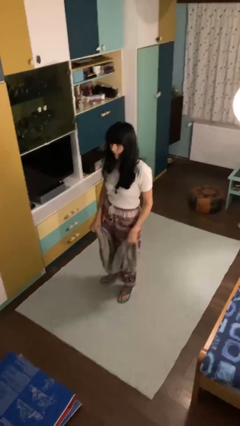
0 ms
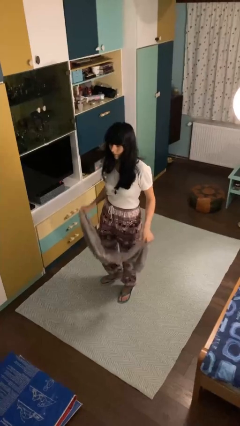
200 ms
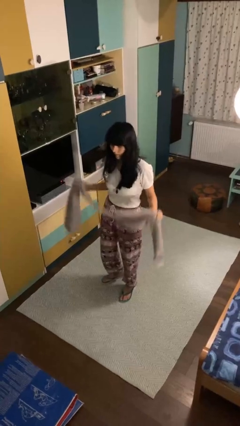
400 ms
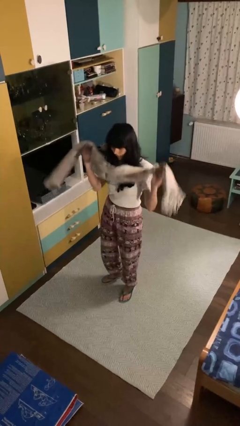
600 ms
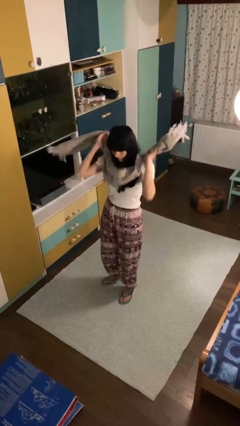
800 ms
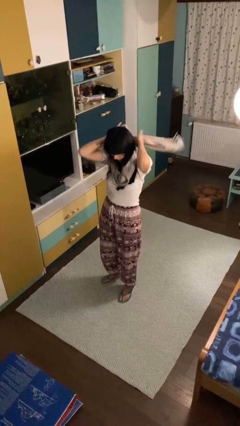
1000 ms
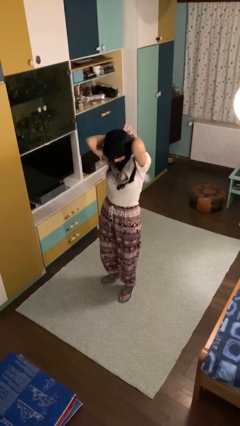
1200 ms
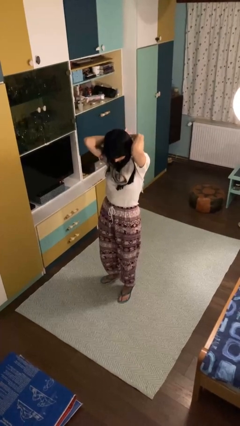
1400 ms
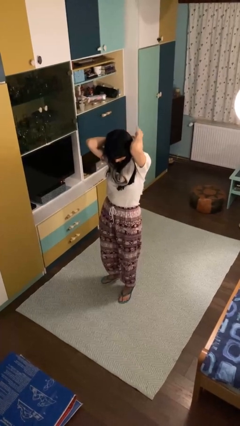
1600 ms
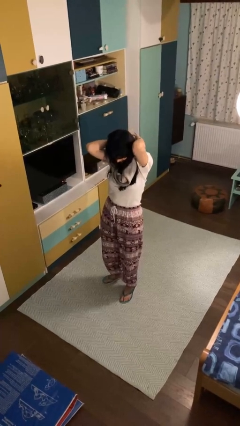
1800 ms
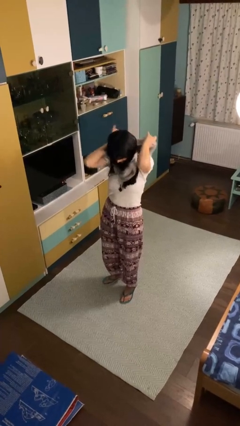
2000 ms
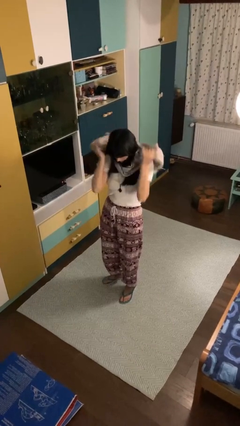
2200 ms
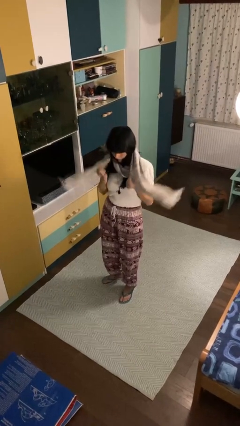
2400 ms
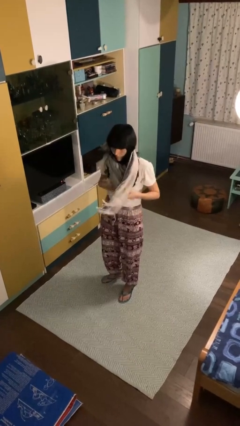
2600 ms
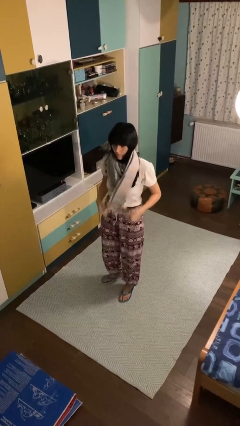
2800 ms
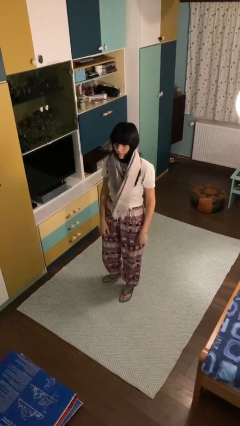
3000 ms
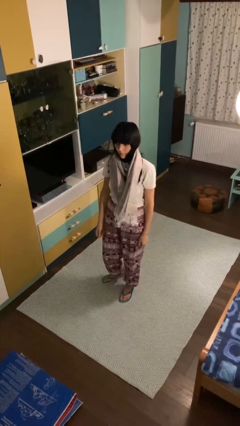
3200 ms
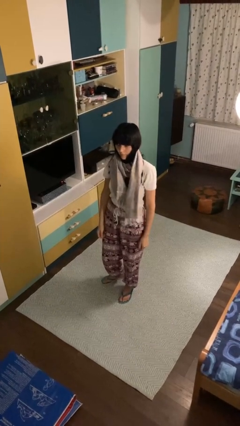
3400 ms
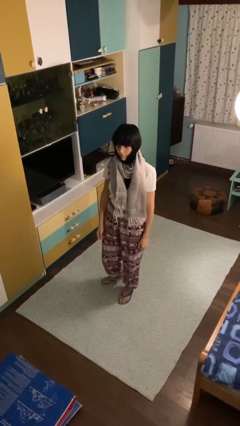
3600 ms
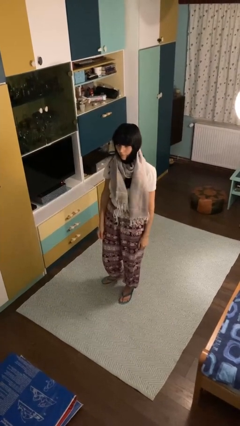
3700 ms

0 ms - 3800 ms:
person puts on scarf

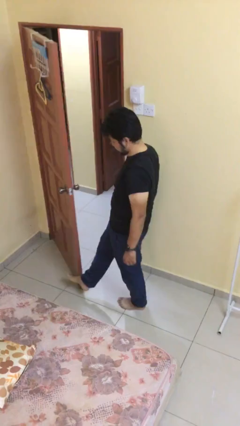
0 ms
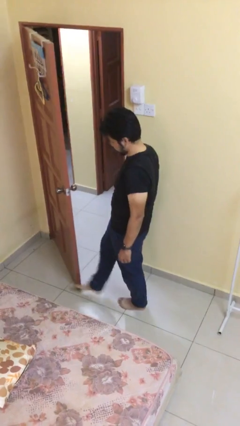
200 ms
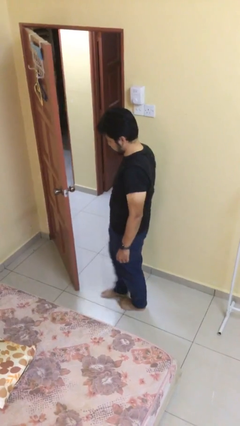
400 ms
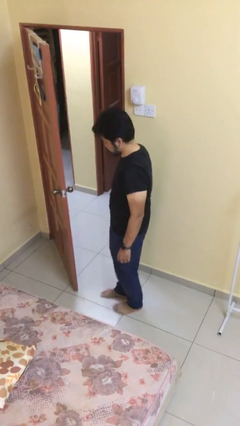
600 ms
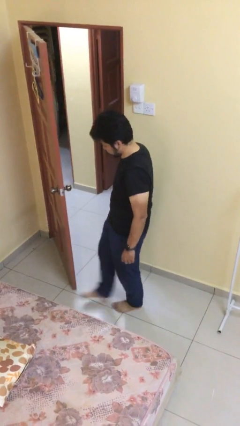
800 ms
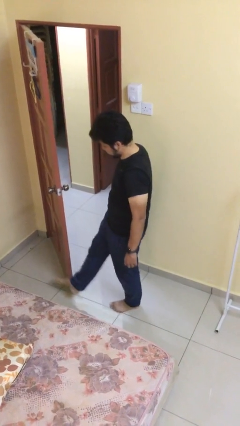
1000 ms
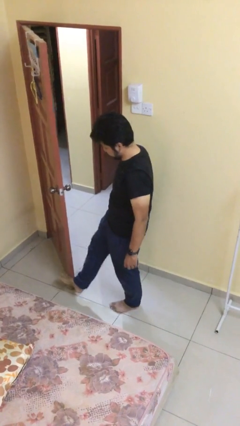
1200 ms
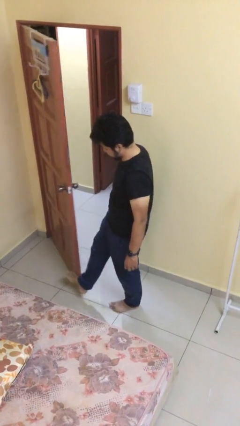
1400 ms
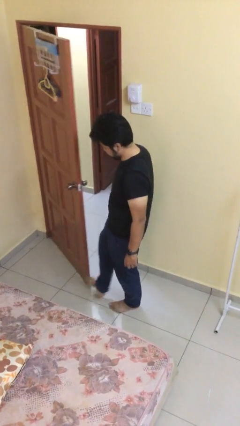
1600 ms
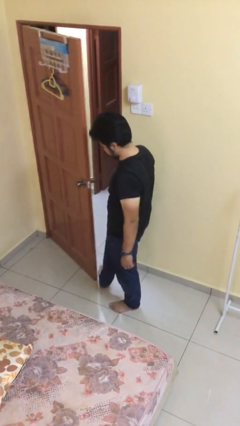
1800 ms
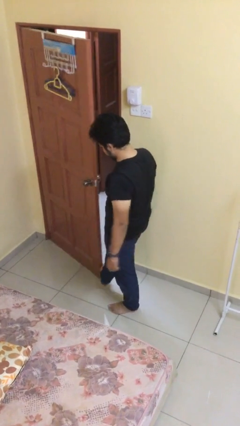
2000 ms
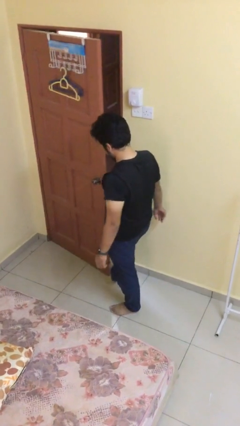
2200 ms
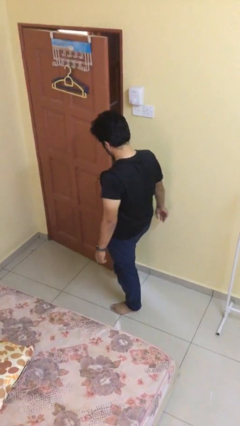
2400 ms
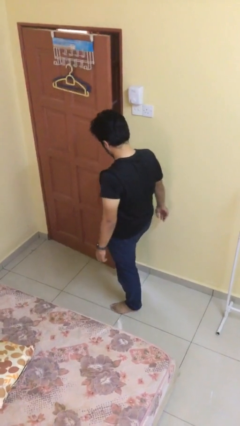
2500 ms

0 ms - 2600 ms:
person closes door with foot

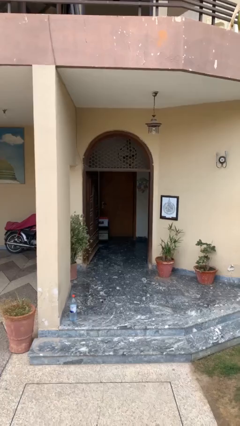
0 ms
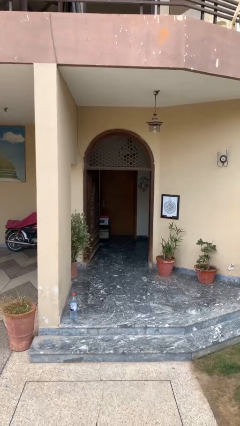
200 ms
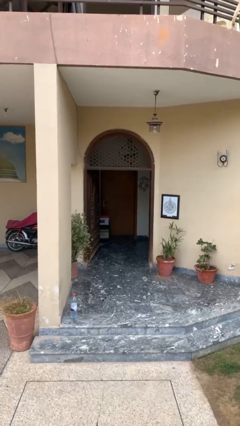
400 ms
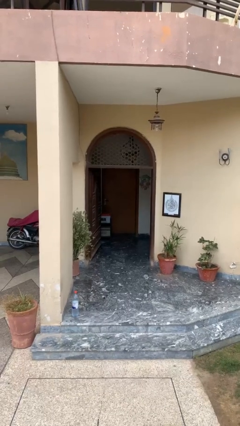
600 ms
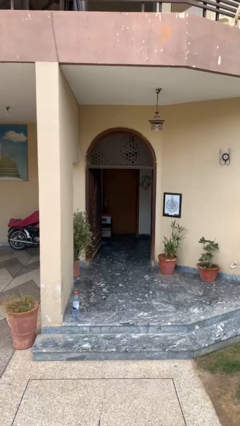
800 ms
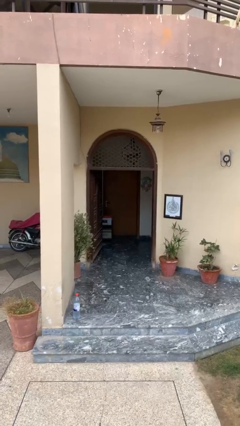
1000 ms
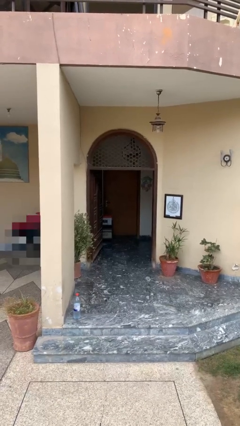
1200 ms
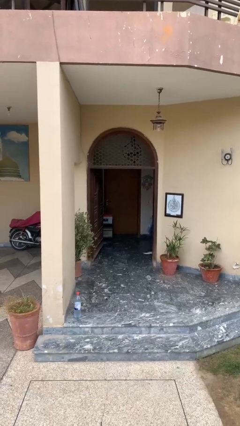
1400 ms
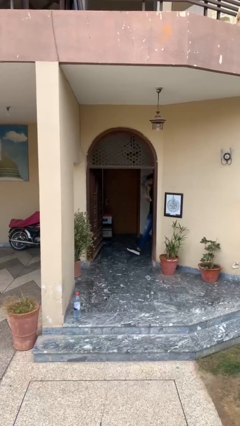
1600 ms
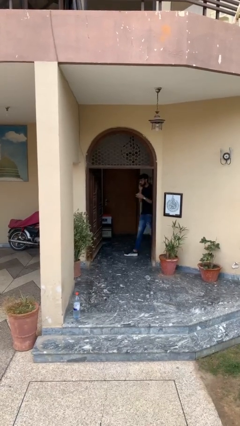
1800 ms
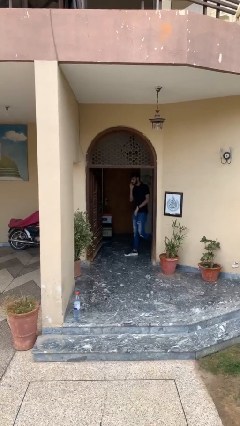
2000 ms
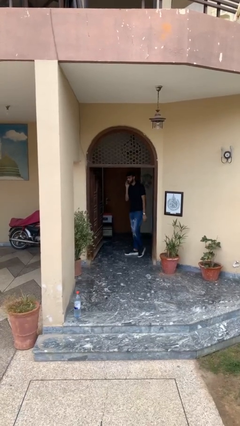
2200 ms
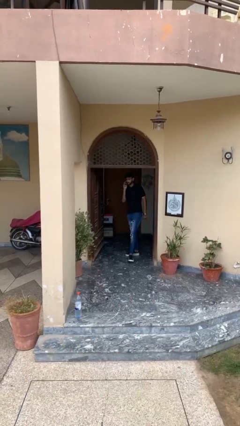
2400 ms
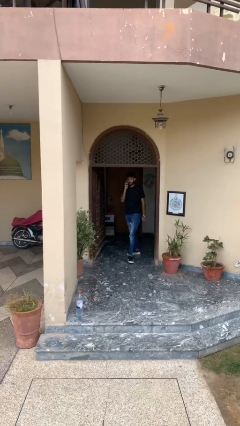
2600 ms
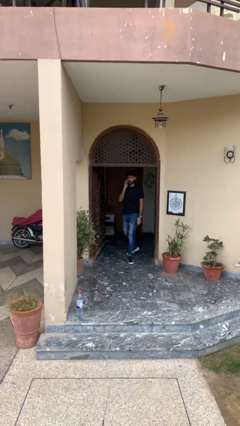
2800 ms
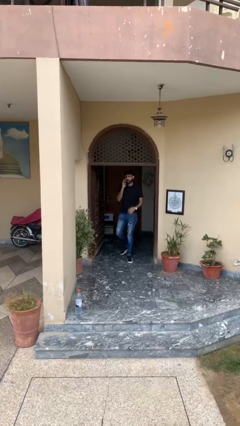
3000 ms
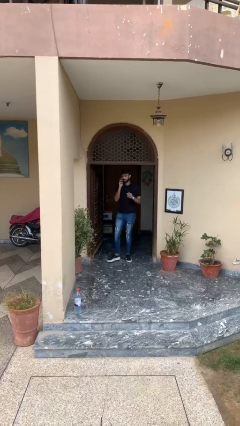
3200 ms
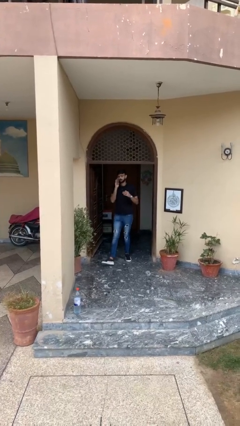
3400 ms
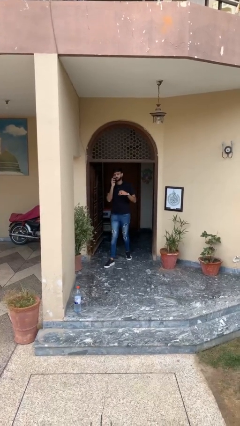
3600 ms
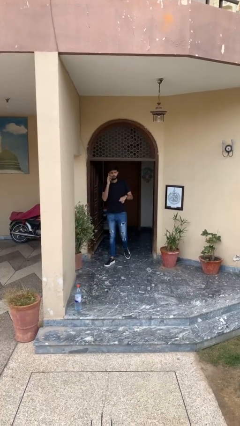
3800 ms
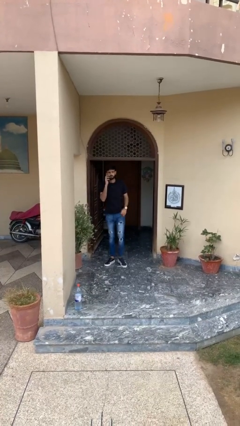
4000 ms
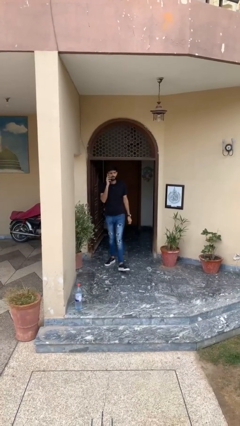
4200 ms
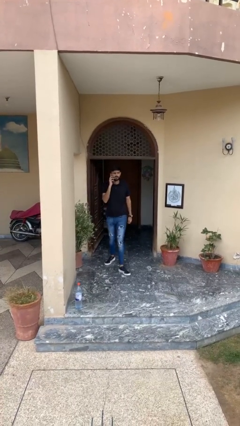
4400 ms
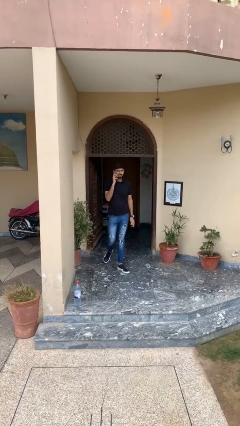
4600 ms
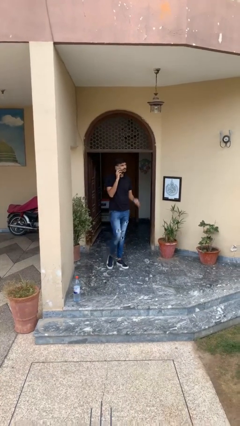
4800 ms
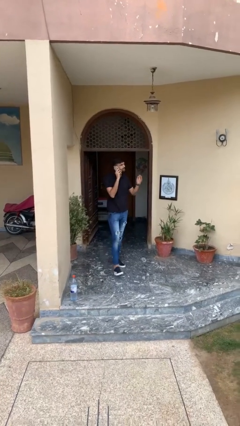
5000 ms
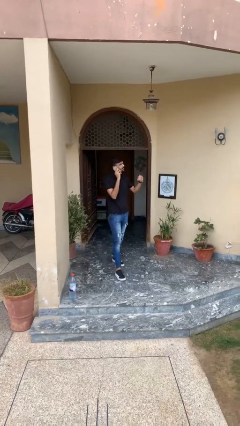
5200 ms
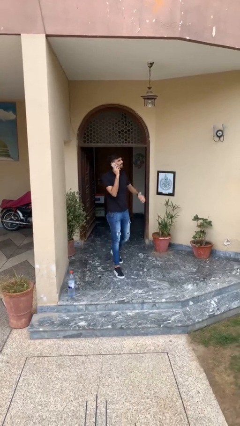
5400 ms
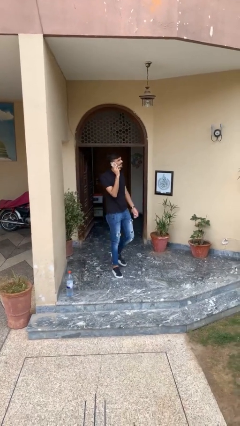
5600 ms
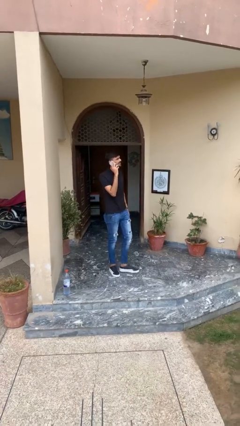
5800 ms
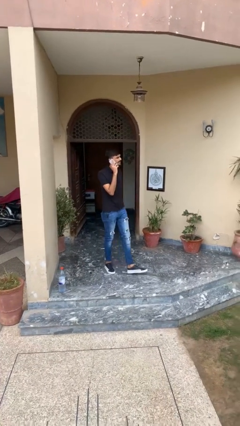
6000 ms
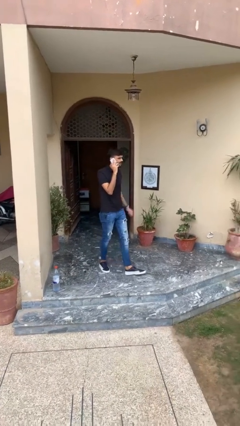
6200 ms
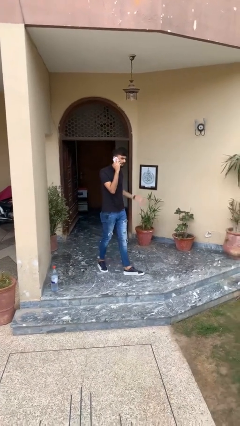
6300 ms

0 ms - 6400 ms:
person enters scene through structure

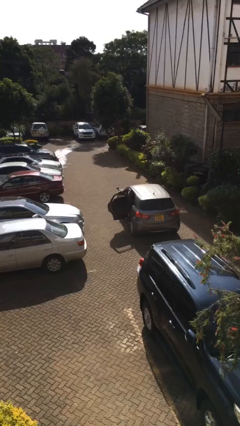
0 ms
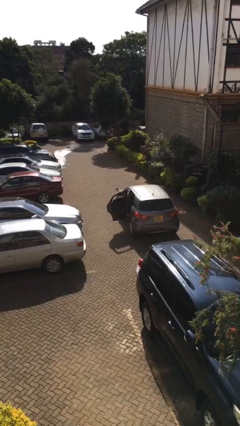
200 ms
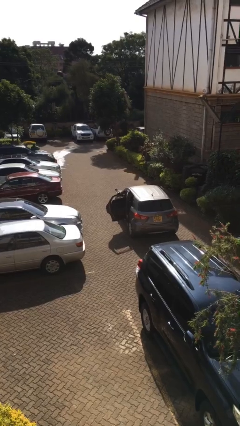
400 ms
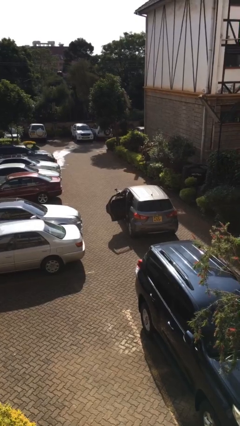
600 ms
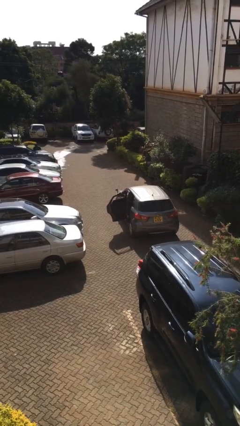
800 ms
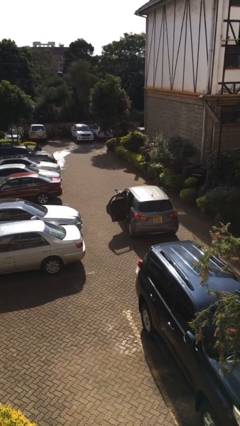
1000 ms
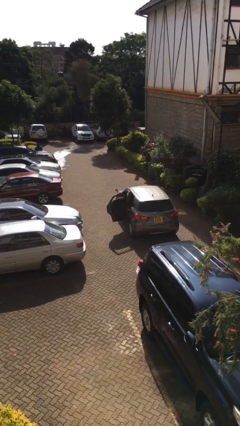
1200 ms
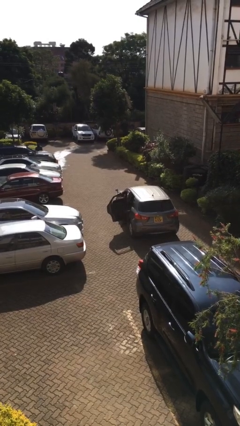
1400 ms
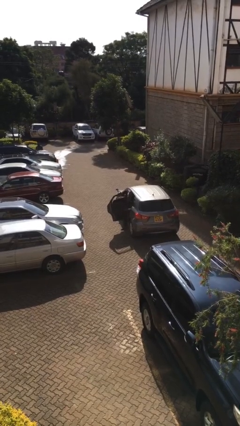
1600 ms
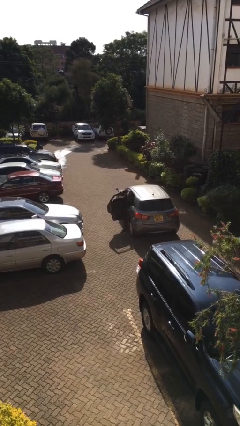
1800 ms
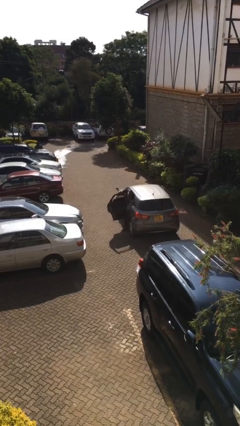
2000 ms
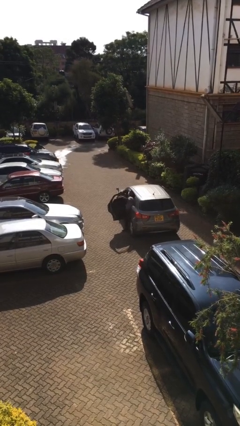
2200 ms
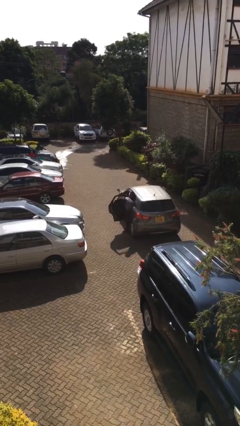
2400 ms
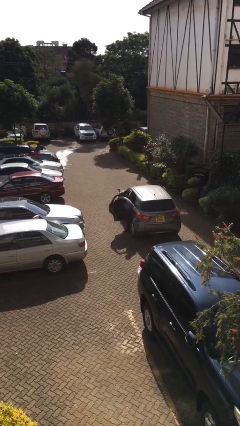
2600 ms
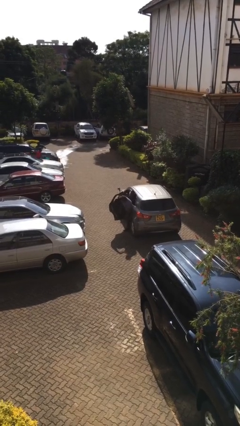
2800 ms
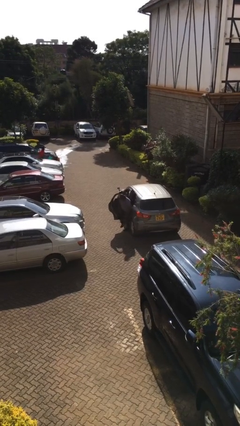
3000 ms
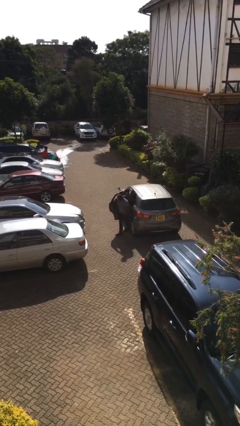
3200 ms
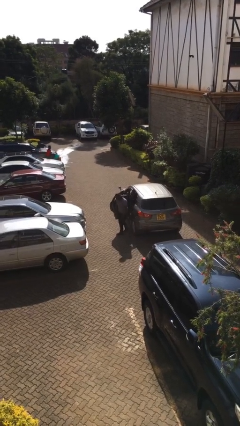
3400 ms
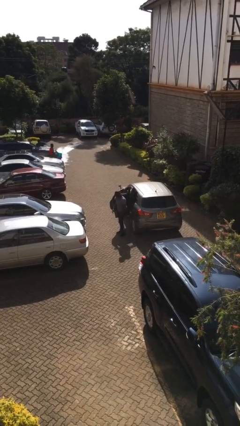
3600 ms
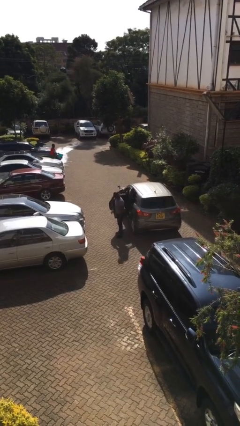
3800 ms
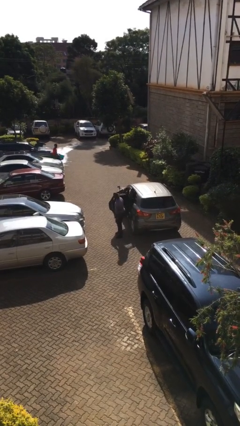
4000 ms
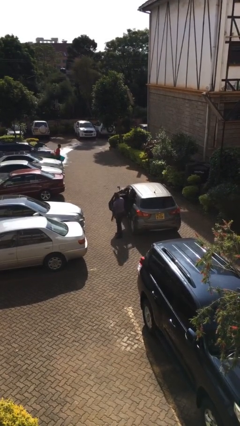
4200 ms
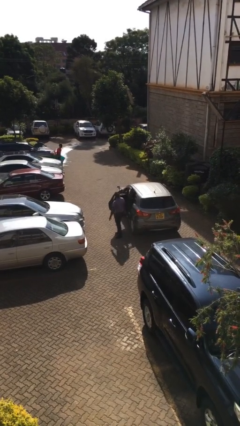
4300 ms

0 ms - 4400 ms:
person exits car

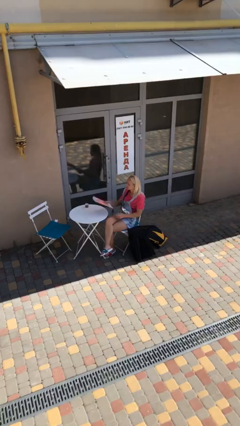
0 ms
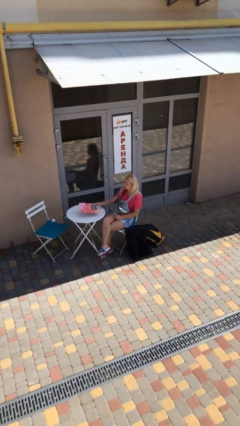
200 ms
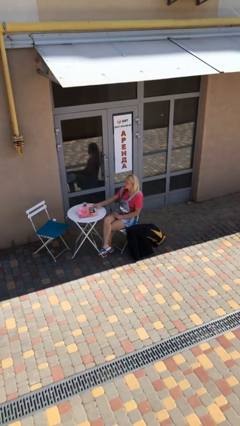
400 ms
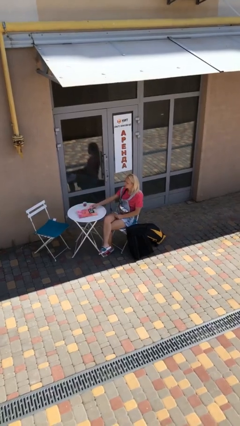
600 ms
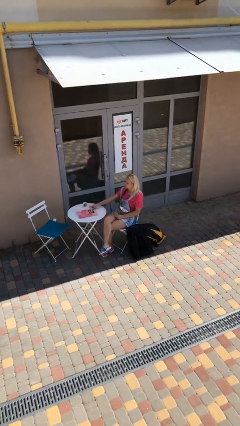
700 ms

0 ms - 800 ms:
person puts down object on table
